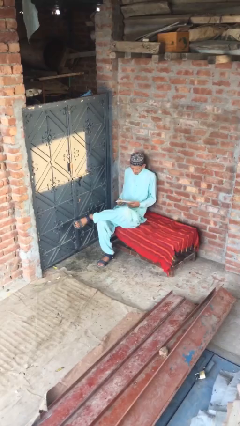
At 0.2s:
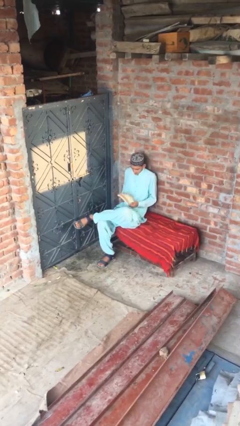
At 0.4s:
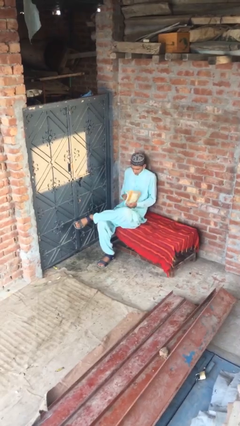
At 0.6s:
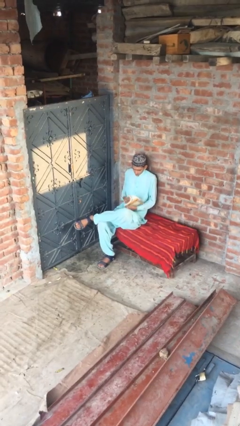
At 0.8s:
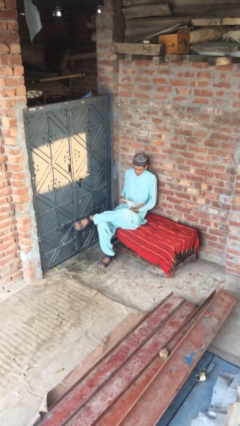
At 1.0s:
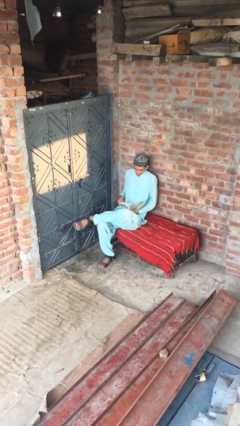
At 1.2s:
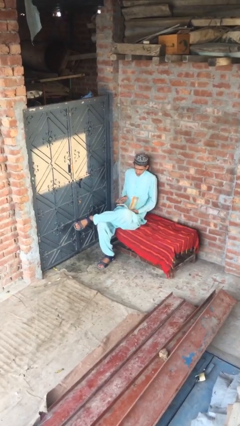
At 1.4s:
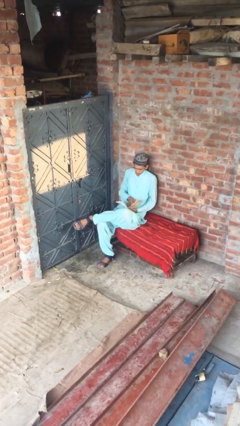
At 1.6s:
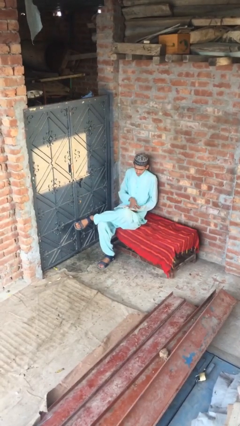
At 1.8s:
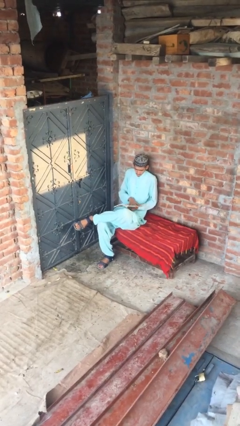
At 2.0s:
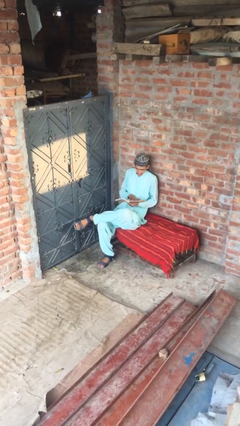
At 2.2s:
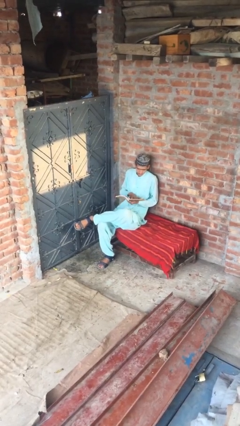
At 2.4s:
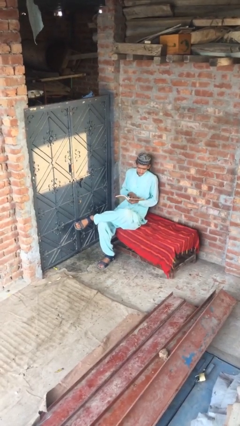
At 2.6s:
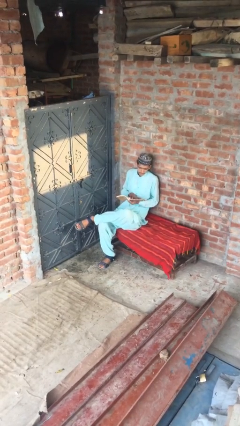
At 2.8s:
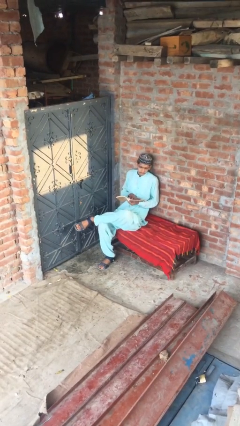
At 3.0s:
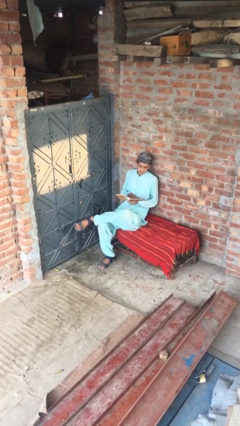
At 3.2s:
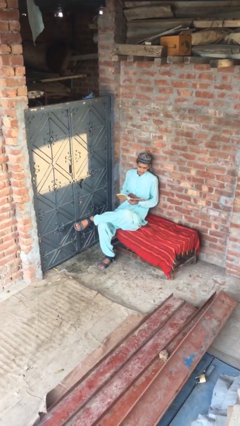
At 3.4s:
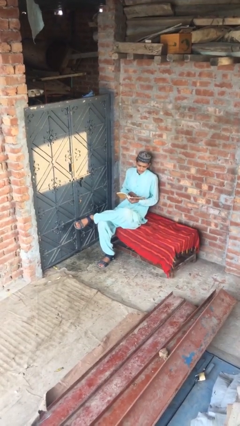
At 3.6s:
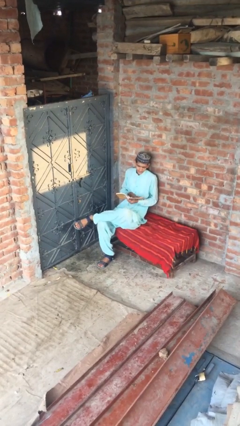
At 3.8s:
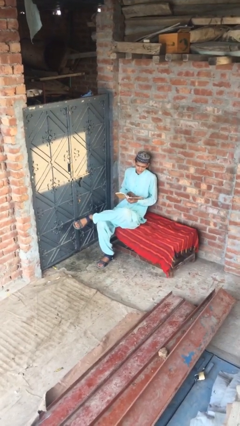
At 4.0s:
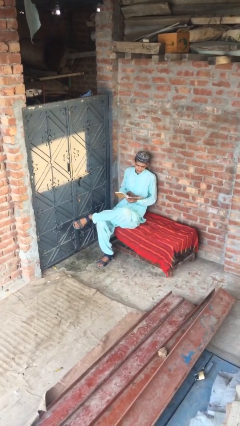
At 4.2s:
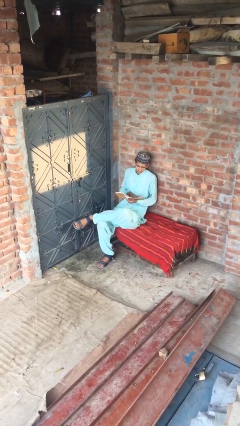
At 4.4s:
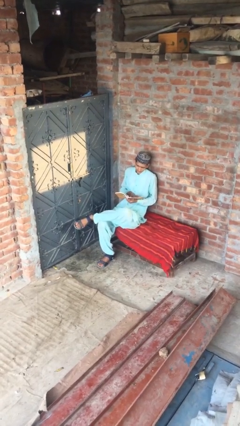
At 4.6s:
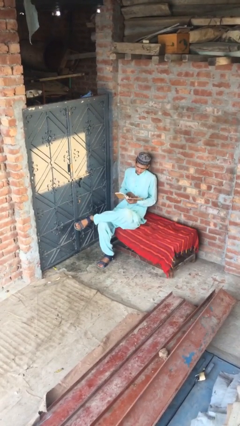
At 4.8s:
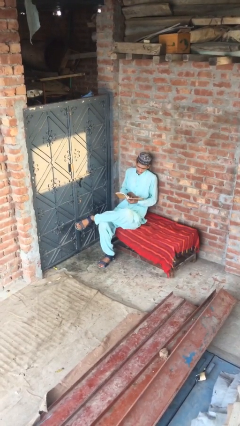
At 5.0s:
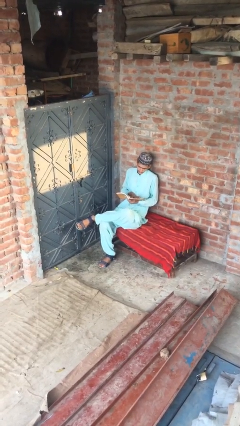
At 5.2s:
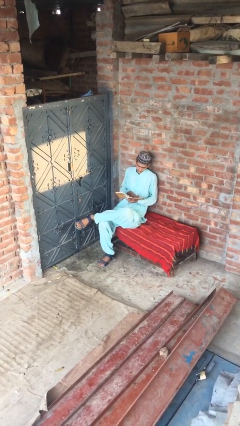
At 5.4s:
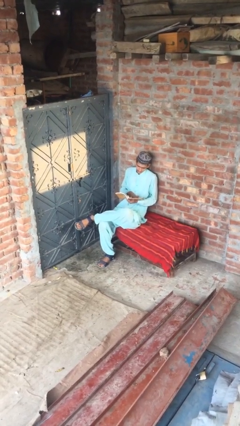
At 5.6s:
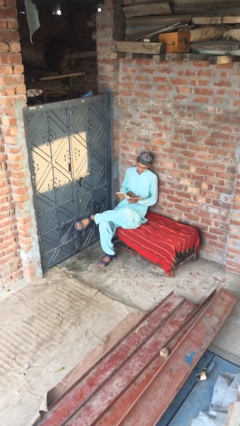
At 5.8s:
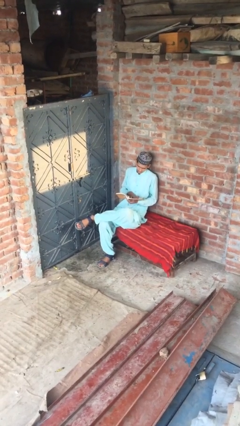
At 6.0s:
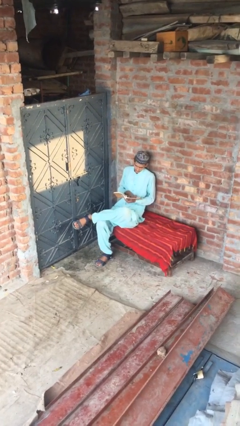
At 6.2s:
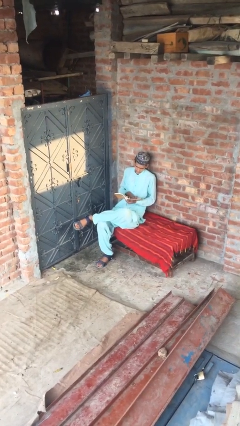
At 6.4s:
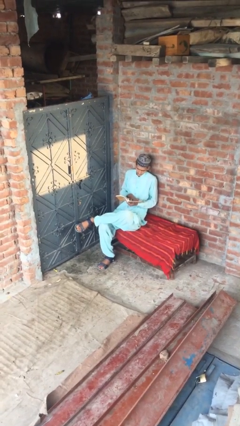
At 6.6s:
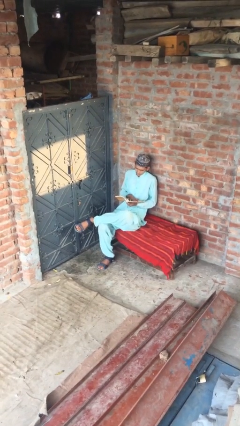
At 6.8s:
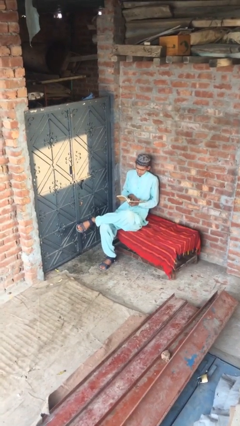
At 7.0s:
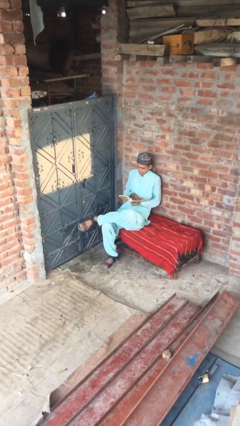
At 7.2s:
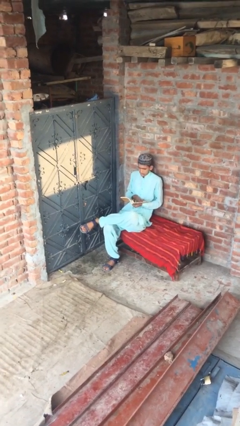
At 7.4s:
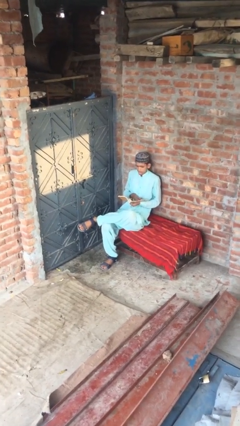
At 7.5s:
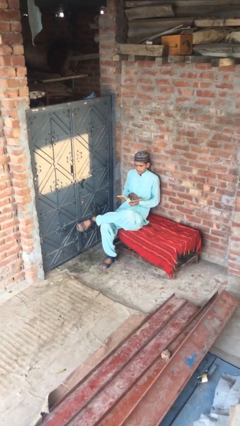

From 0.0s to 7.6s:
person reads document

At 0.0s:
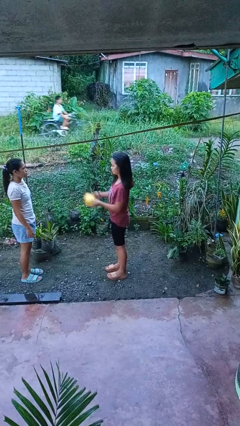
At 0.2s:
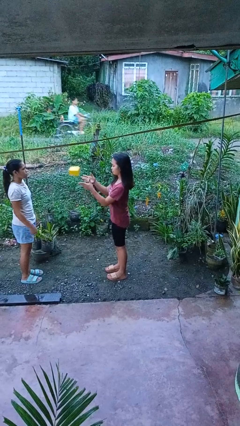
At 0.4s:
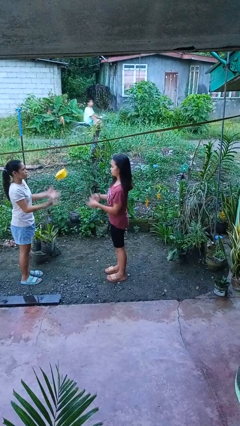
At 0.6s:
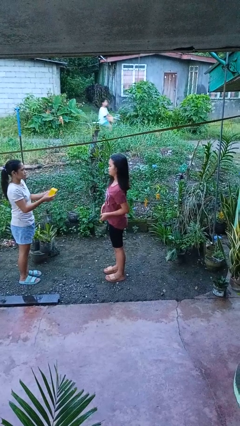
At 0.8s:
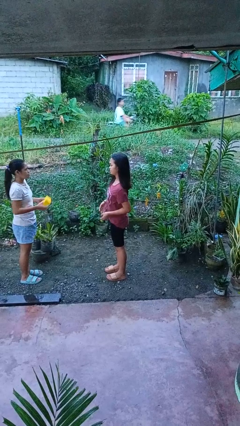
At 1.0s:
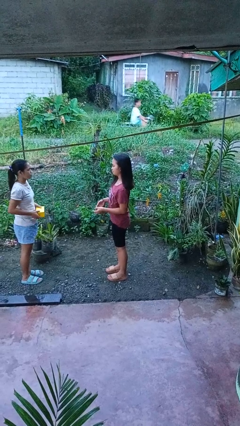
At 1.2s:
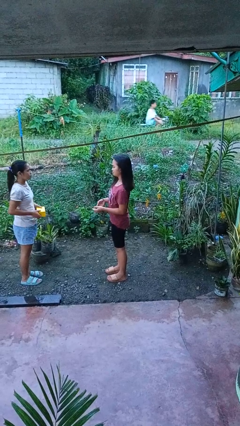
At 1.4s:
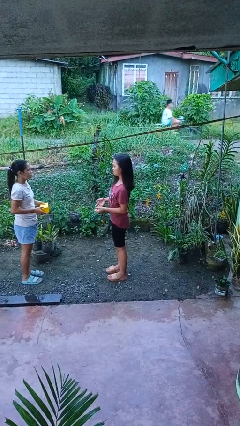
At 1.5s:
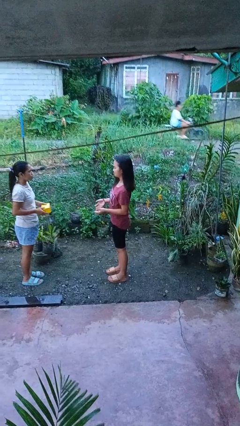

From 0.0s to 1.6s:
person throws object to person

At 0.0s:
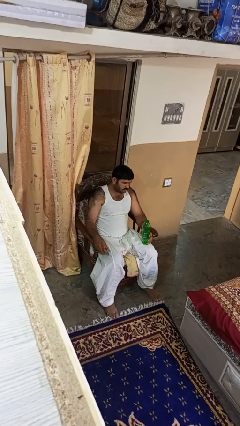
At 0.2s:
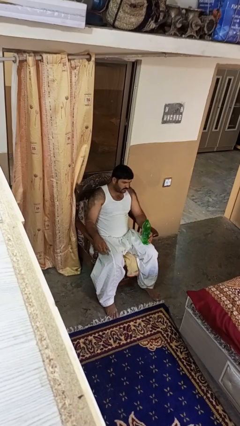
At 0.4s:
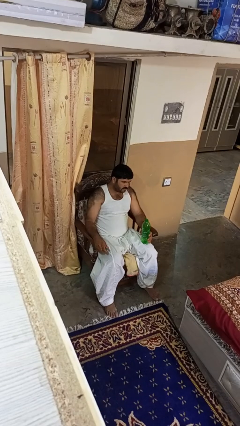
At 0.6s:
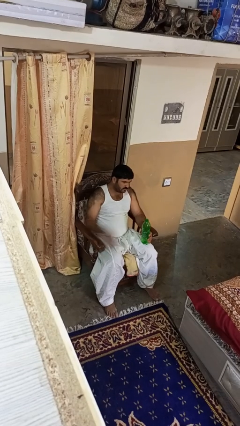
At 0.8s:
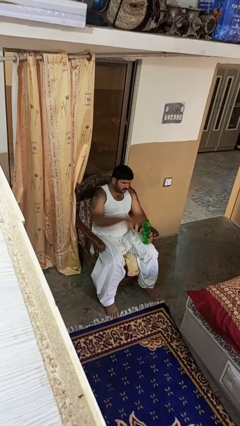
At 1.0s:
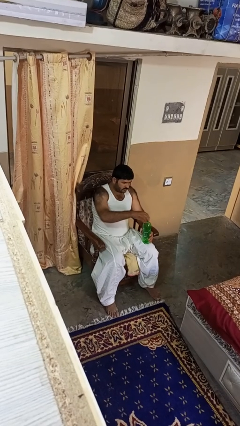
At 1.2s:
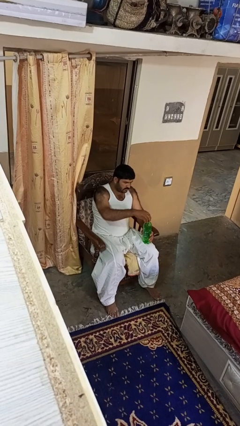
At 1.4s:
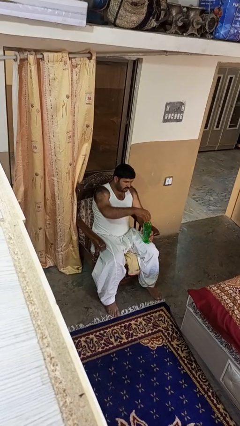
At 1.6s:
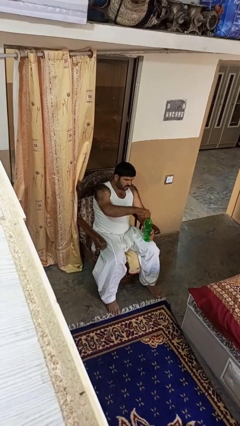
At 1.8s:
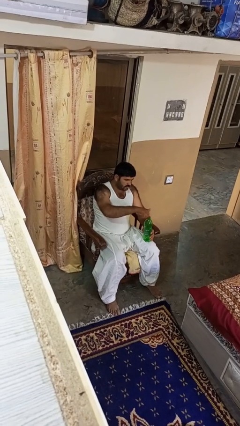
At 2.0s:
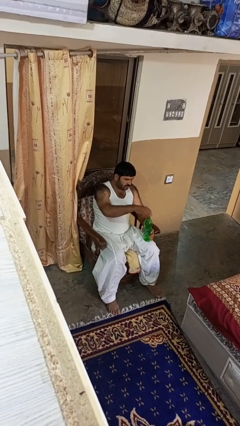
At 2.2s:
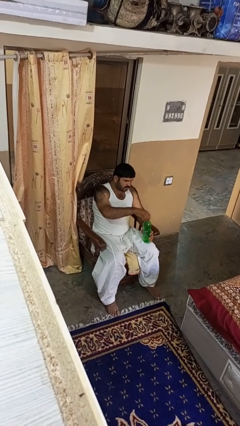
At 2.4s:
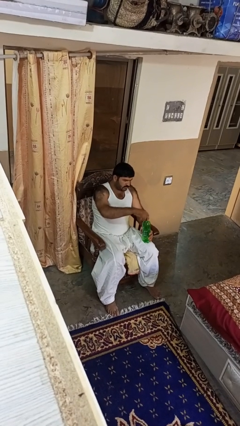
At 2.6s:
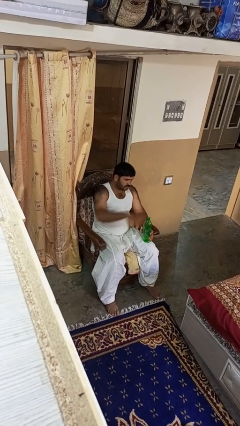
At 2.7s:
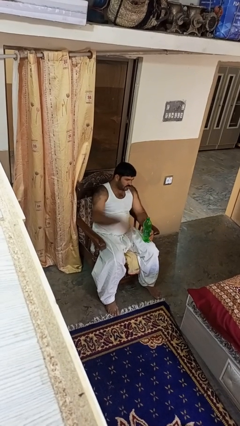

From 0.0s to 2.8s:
person screws lid to bottle

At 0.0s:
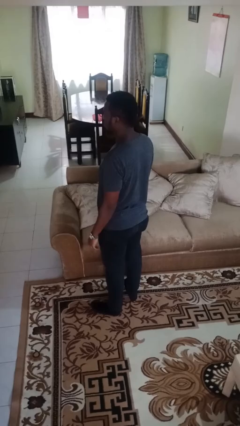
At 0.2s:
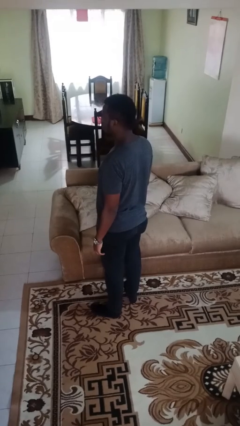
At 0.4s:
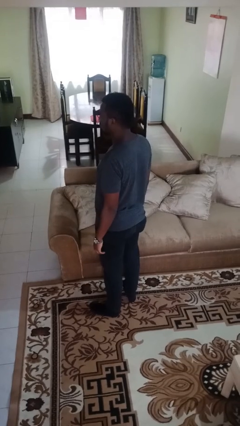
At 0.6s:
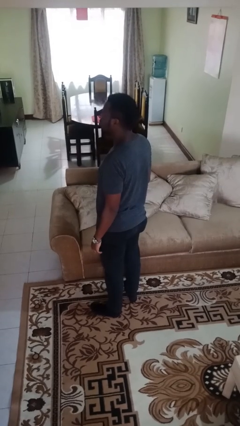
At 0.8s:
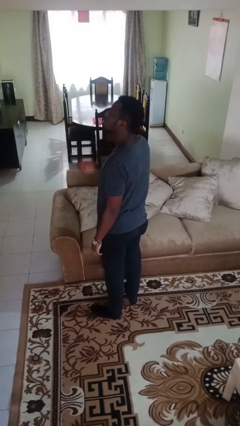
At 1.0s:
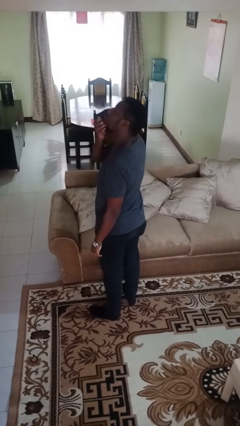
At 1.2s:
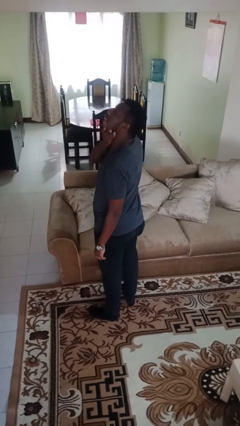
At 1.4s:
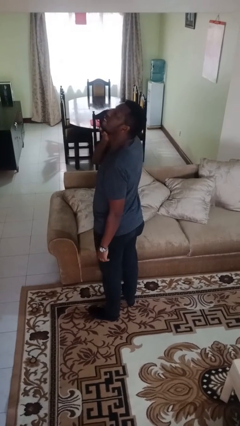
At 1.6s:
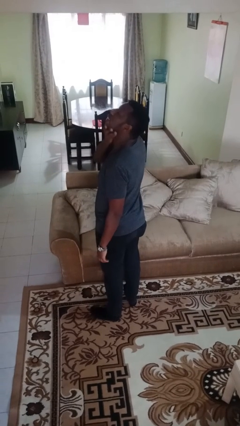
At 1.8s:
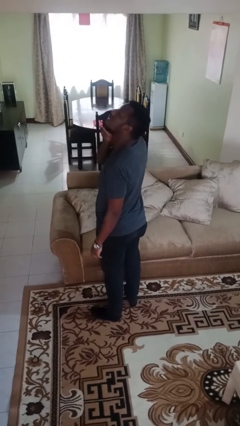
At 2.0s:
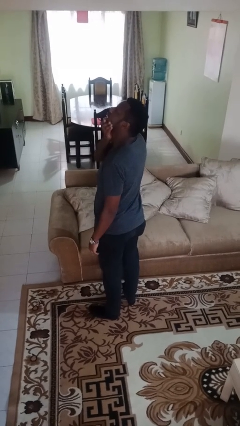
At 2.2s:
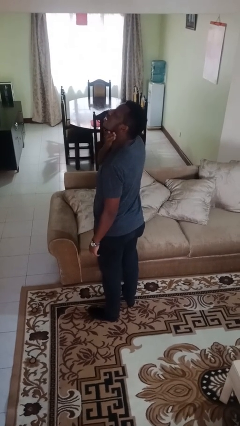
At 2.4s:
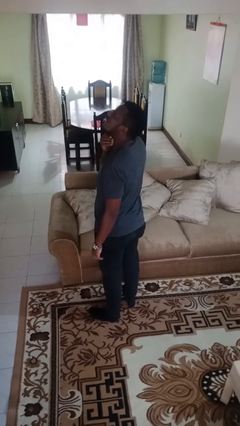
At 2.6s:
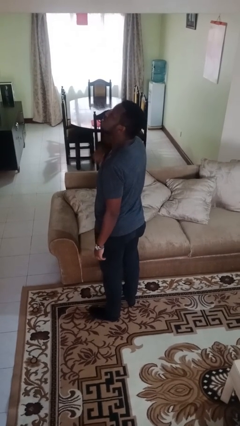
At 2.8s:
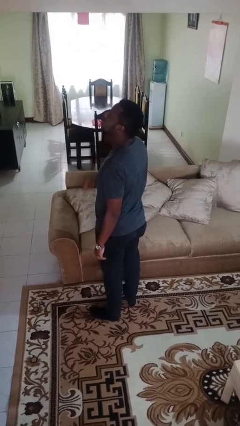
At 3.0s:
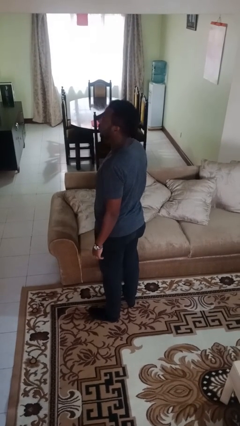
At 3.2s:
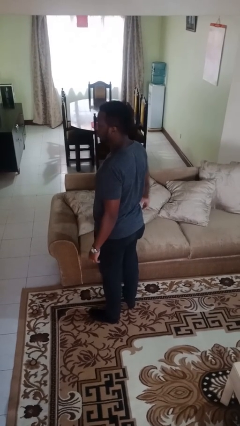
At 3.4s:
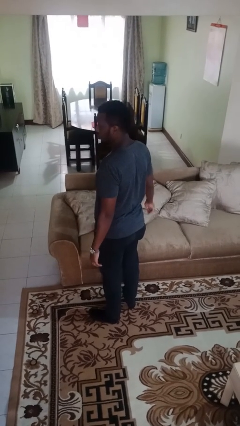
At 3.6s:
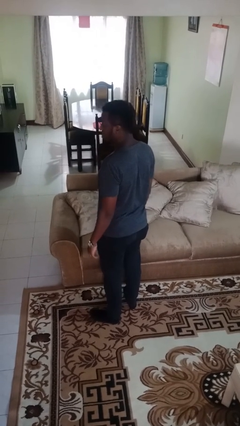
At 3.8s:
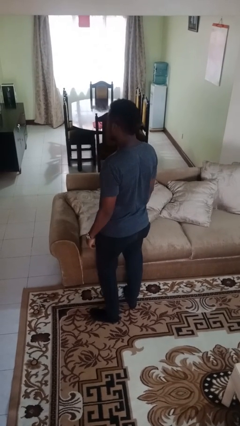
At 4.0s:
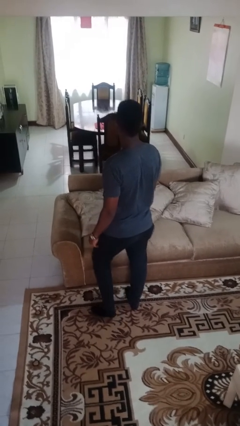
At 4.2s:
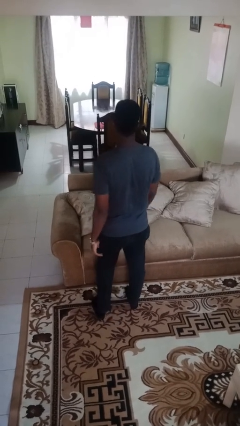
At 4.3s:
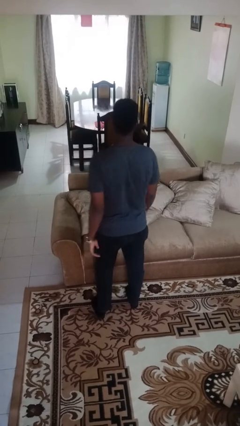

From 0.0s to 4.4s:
person strokes chin

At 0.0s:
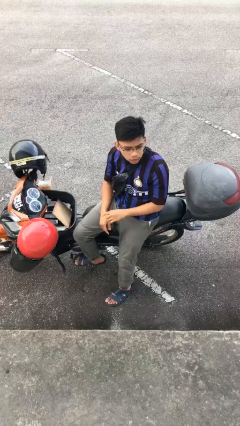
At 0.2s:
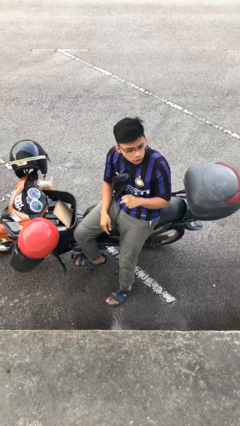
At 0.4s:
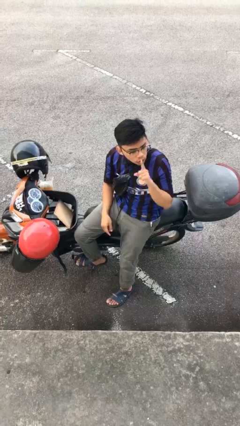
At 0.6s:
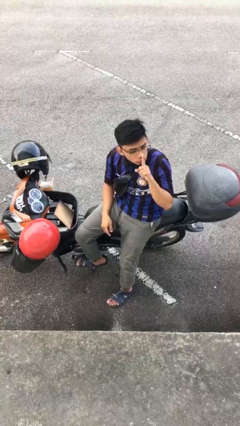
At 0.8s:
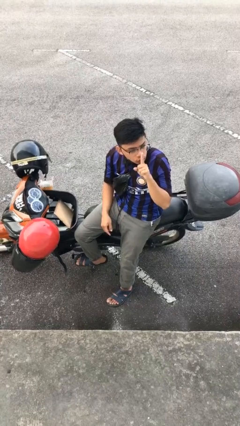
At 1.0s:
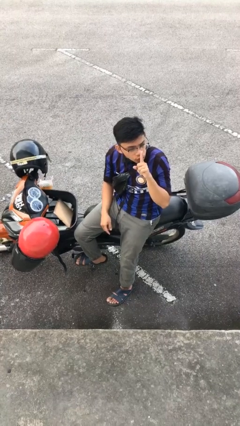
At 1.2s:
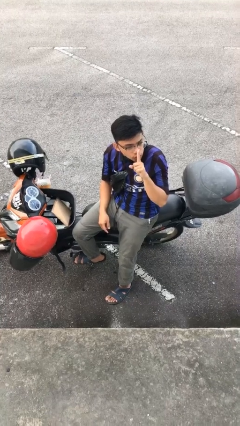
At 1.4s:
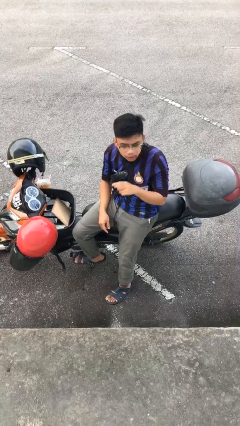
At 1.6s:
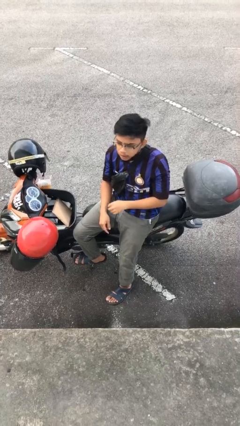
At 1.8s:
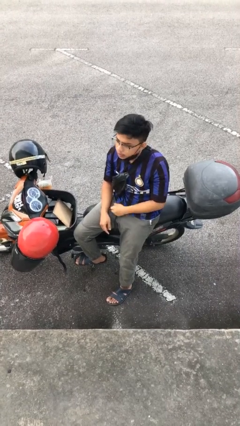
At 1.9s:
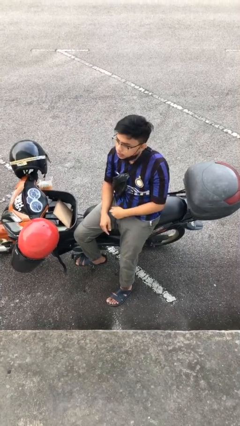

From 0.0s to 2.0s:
person gestures be quiet
